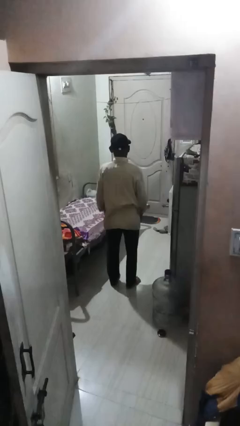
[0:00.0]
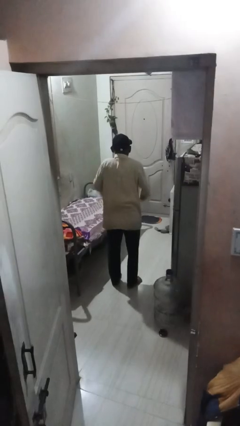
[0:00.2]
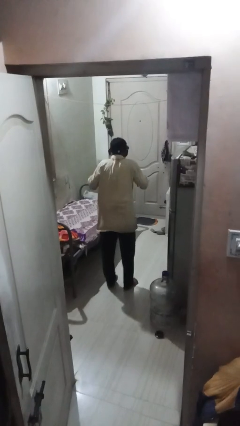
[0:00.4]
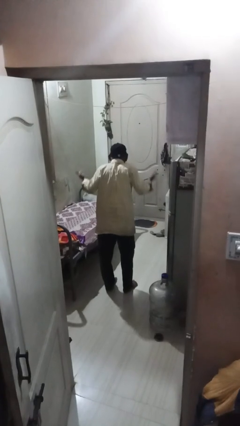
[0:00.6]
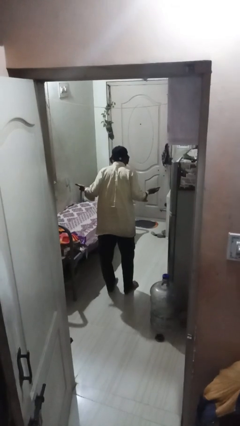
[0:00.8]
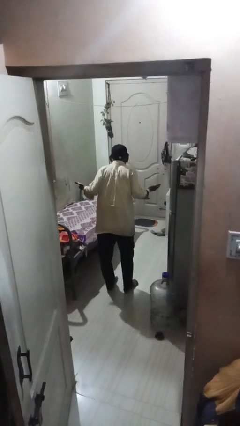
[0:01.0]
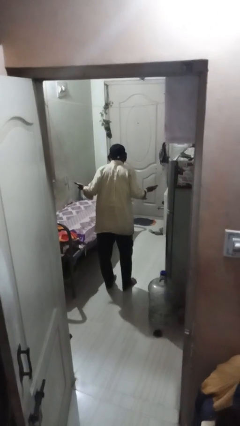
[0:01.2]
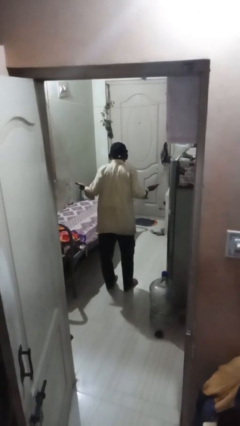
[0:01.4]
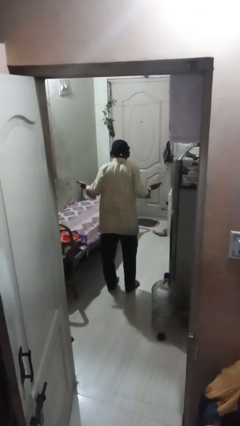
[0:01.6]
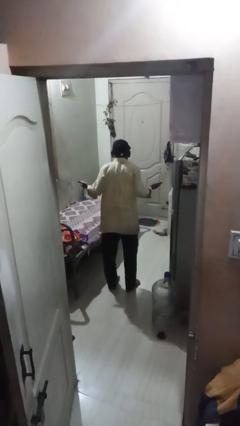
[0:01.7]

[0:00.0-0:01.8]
person shrugs

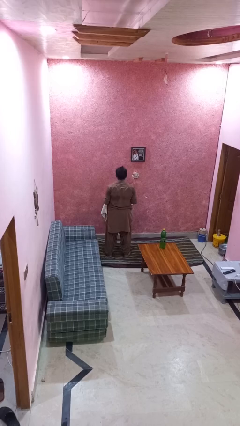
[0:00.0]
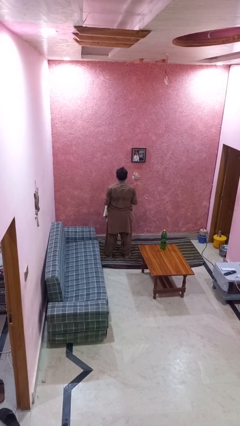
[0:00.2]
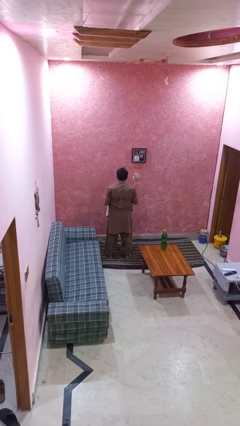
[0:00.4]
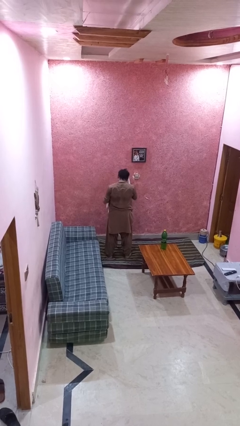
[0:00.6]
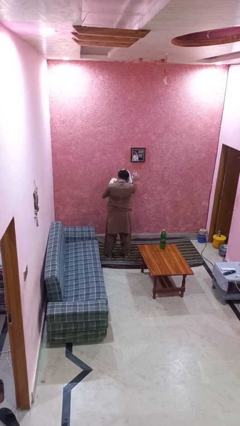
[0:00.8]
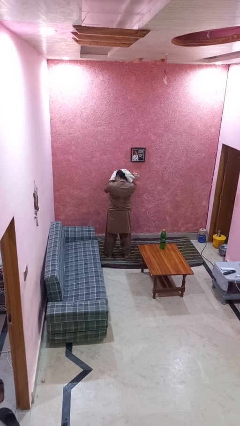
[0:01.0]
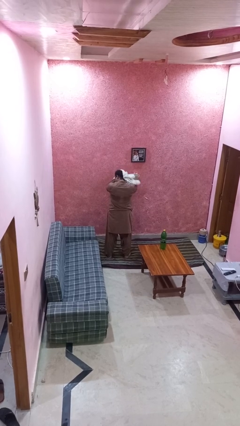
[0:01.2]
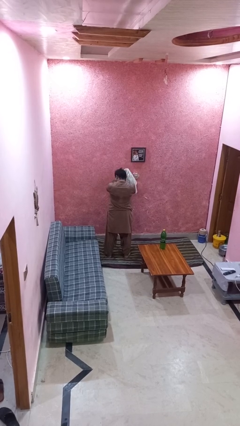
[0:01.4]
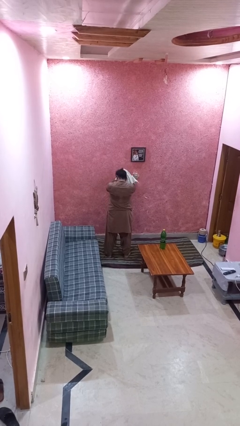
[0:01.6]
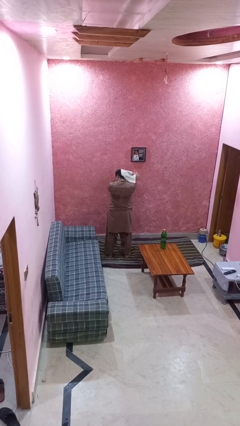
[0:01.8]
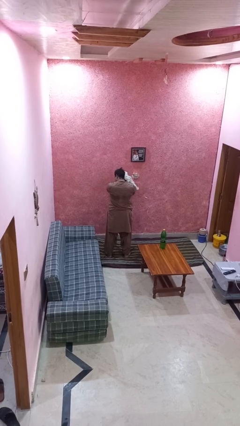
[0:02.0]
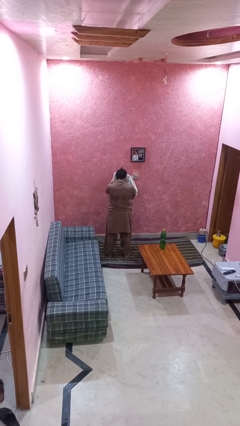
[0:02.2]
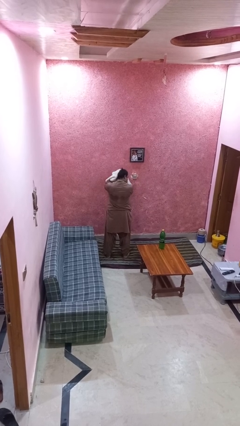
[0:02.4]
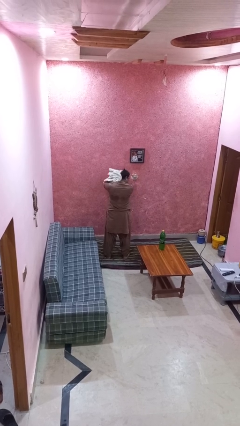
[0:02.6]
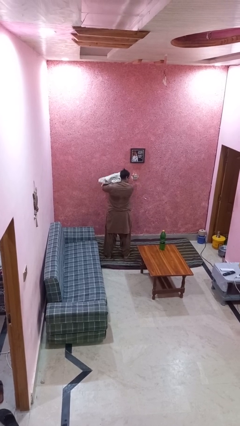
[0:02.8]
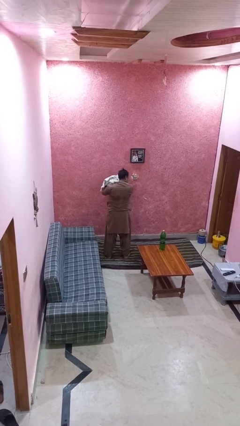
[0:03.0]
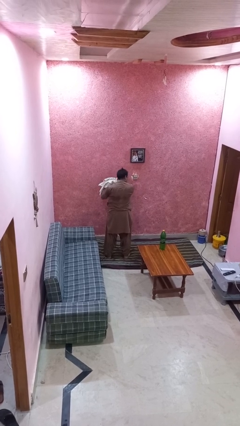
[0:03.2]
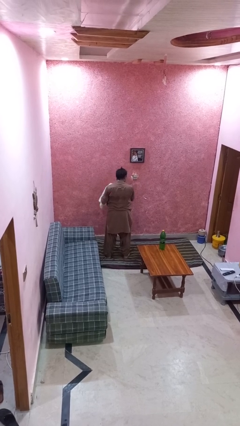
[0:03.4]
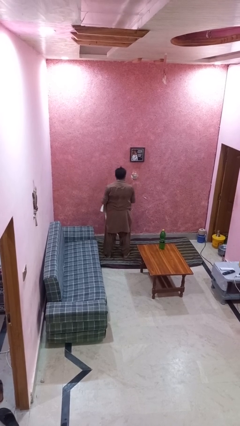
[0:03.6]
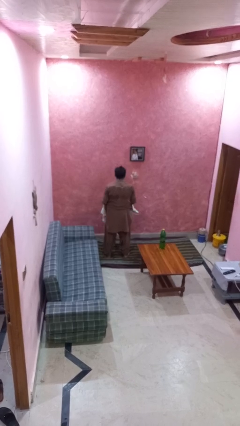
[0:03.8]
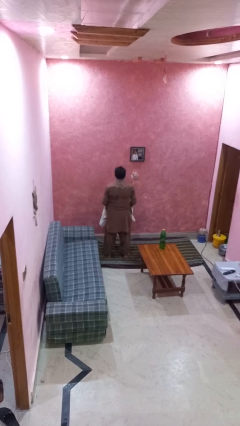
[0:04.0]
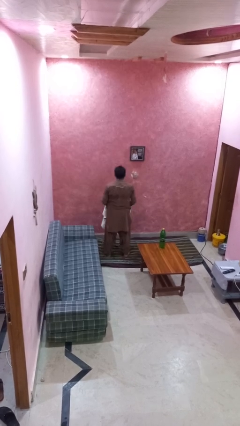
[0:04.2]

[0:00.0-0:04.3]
person dries hair with towel

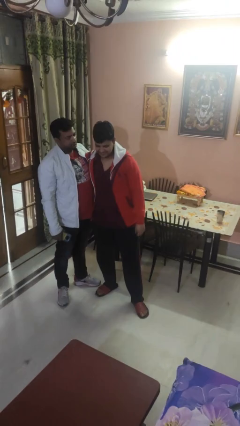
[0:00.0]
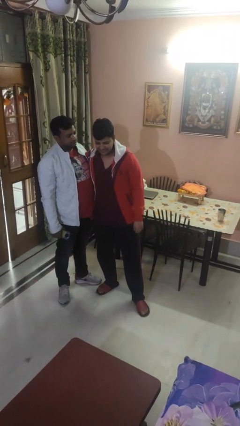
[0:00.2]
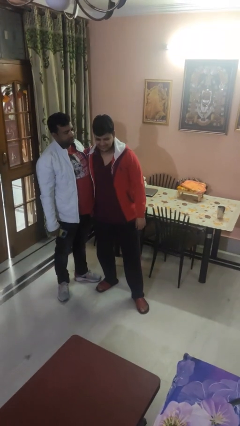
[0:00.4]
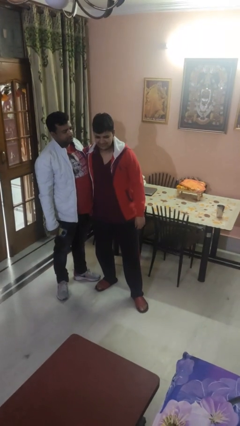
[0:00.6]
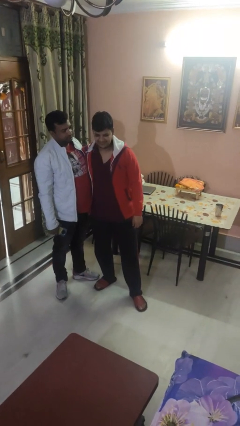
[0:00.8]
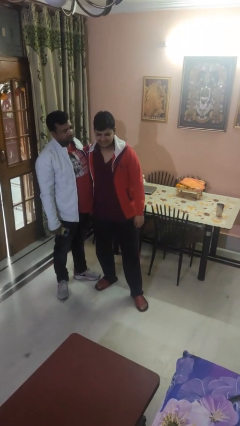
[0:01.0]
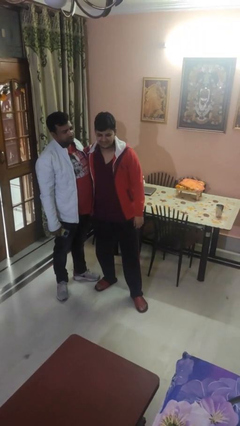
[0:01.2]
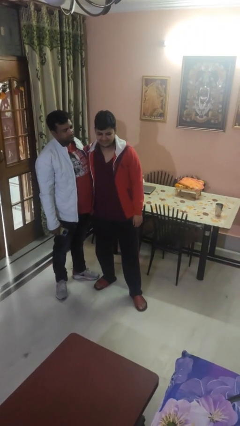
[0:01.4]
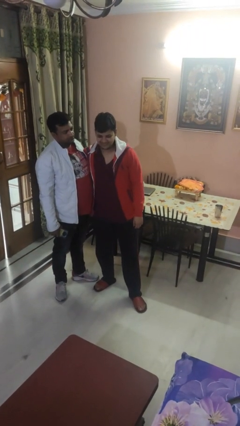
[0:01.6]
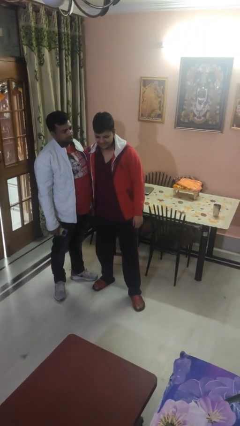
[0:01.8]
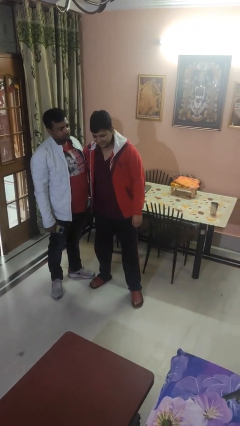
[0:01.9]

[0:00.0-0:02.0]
person hugs person from side

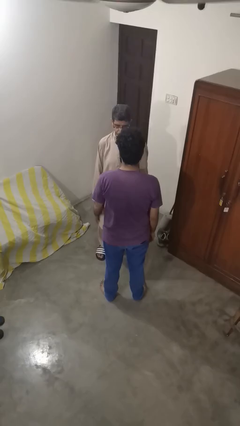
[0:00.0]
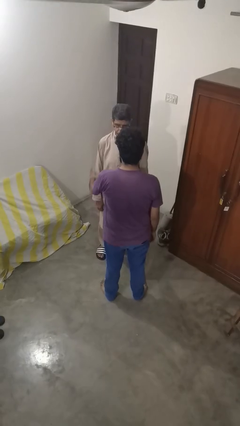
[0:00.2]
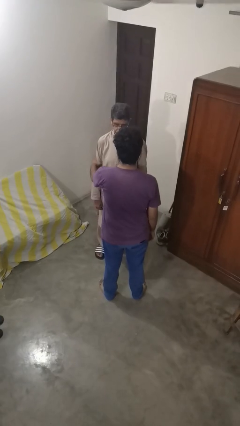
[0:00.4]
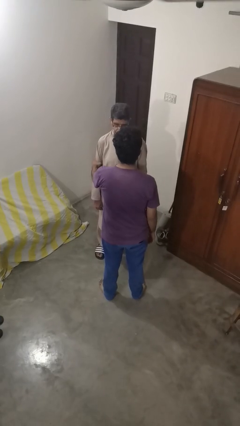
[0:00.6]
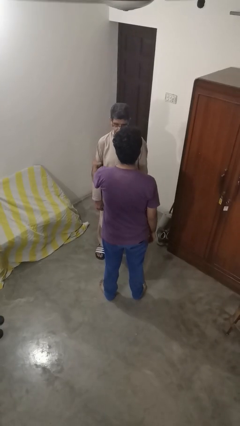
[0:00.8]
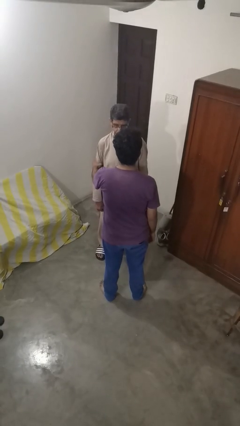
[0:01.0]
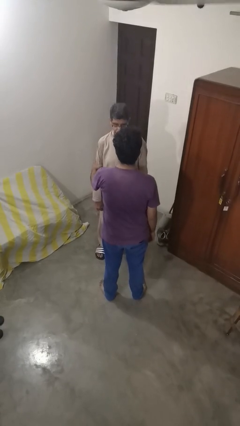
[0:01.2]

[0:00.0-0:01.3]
person grabs person by bicep

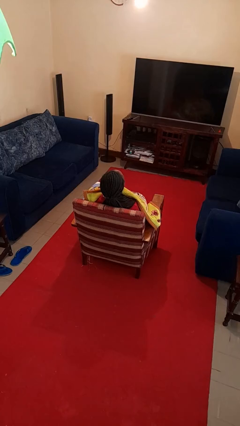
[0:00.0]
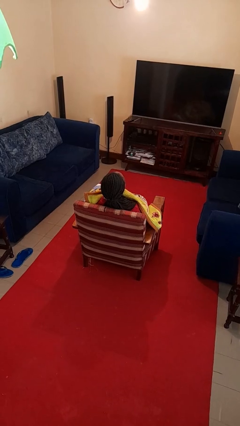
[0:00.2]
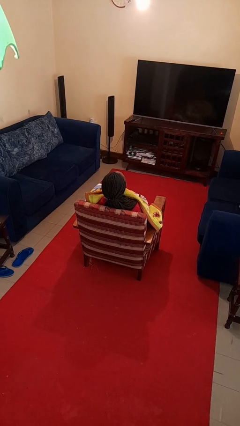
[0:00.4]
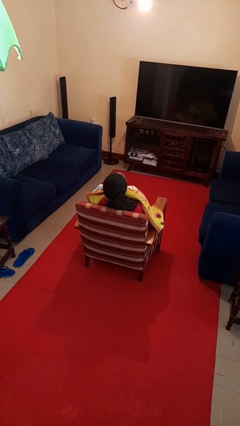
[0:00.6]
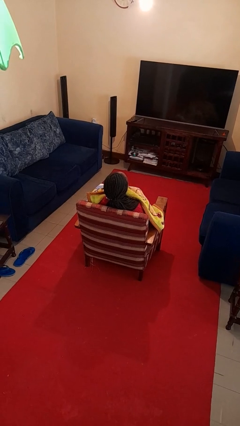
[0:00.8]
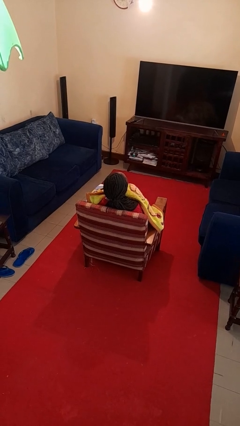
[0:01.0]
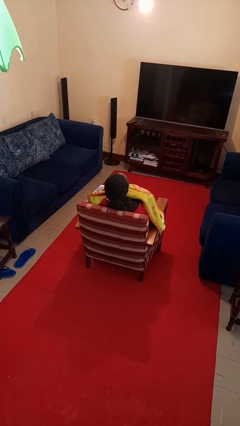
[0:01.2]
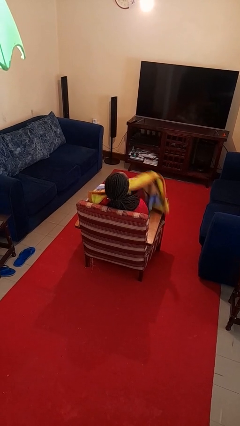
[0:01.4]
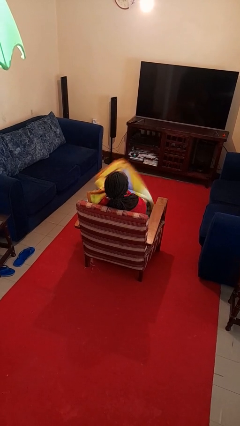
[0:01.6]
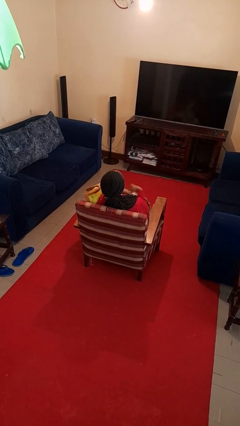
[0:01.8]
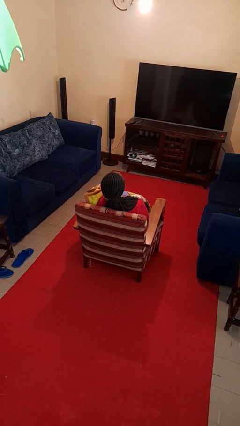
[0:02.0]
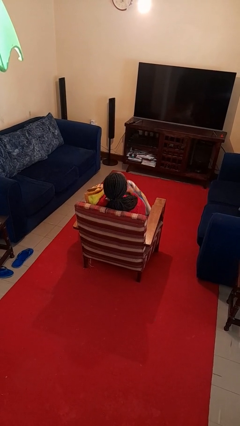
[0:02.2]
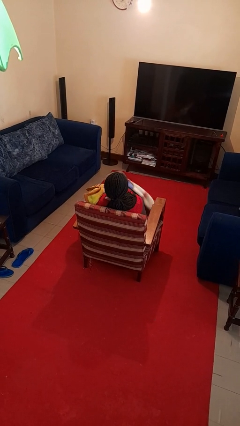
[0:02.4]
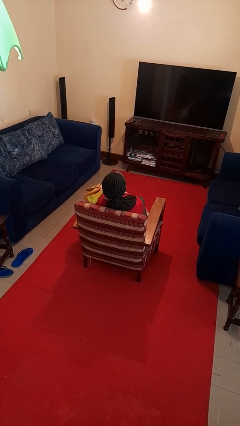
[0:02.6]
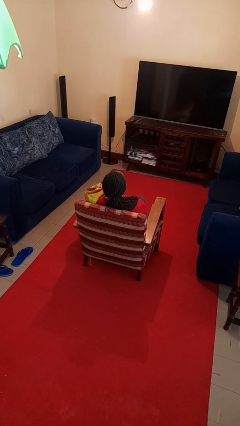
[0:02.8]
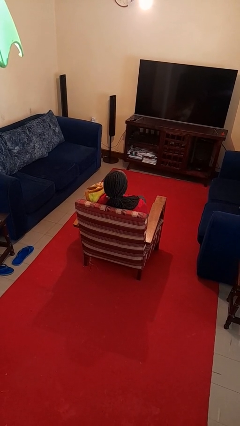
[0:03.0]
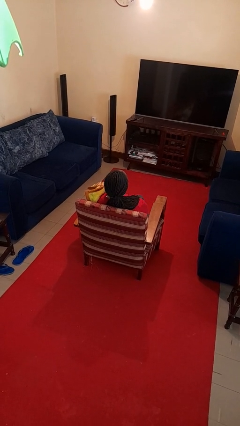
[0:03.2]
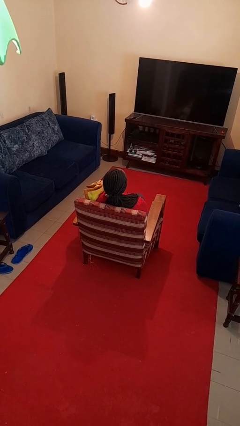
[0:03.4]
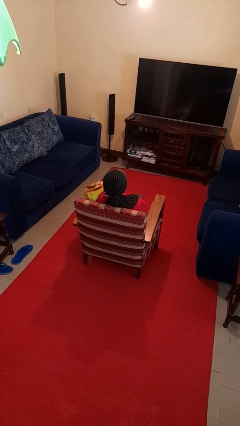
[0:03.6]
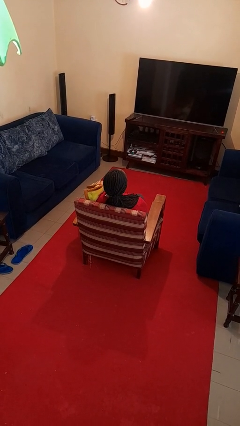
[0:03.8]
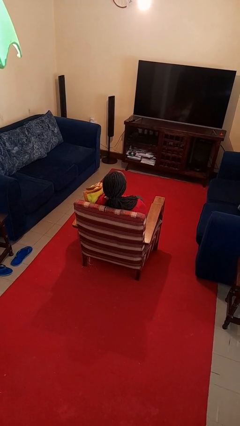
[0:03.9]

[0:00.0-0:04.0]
person uncovers with blanket

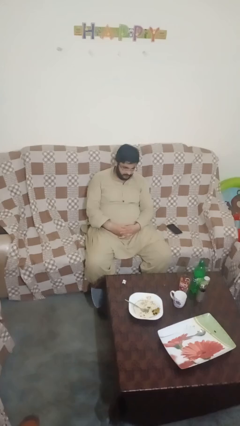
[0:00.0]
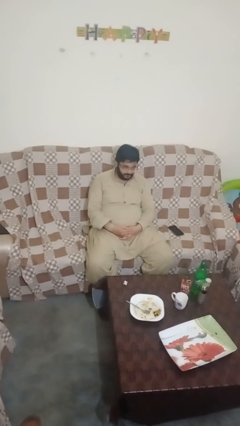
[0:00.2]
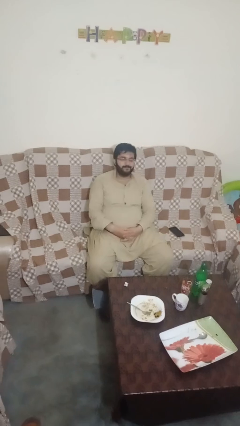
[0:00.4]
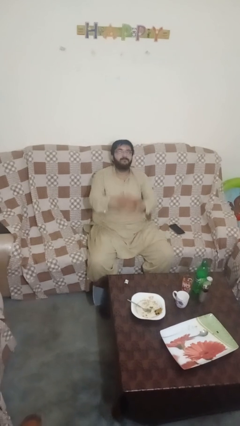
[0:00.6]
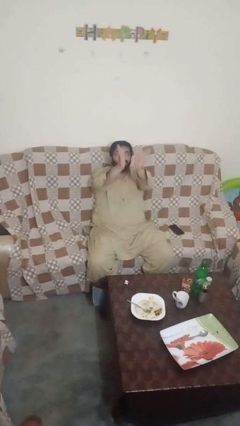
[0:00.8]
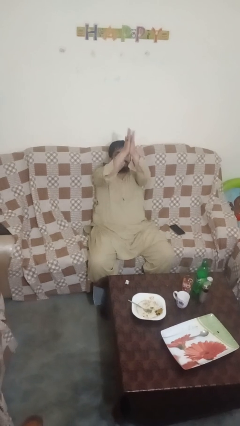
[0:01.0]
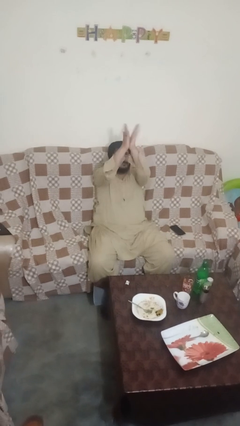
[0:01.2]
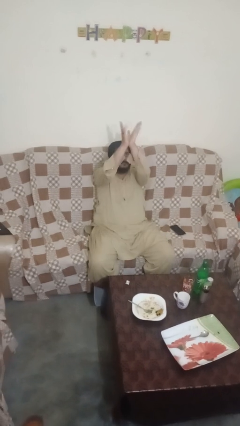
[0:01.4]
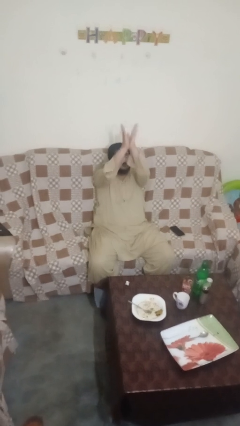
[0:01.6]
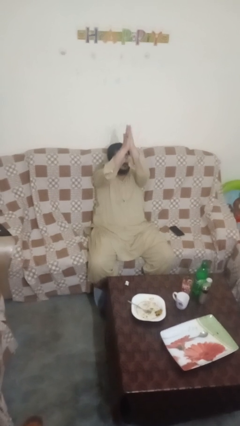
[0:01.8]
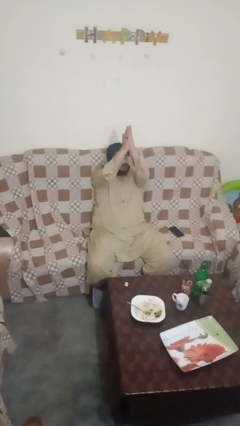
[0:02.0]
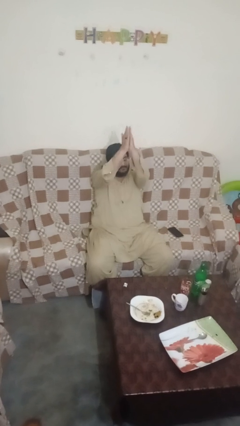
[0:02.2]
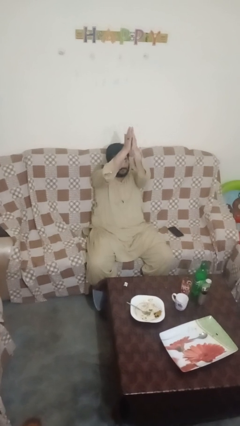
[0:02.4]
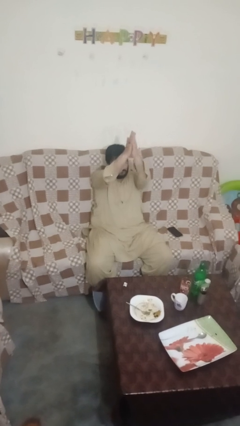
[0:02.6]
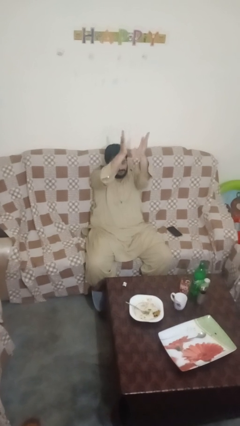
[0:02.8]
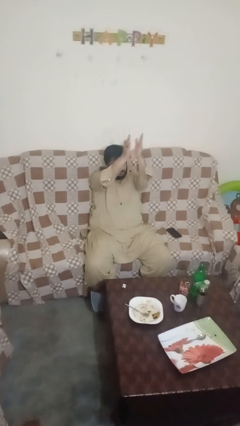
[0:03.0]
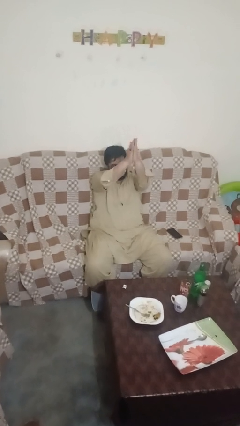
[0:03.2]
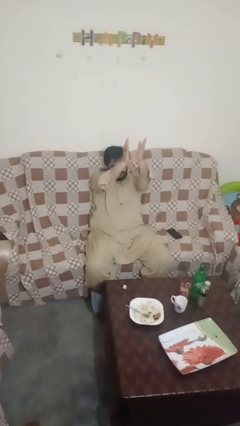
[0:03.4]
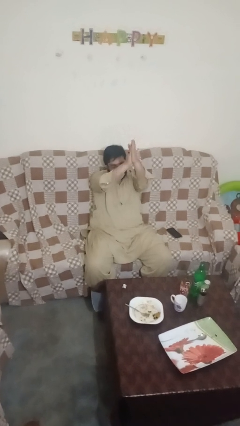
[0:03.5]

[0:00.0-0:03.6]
person claps hands

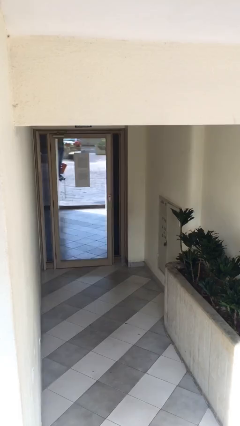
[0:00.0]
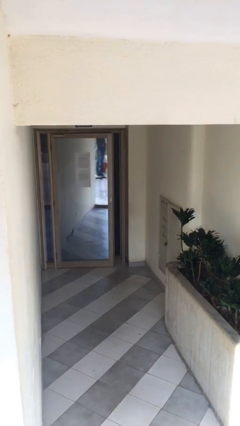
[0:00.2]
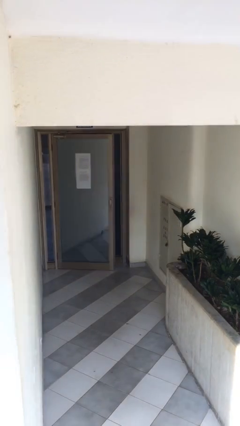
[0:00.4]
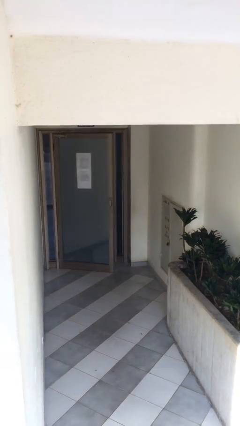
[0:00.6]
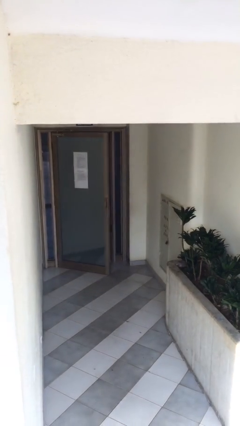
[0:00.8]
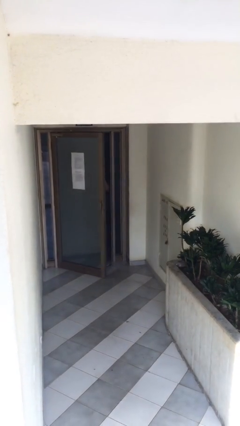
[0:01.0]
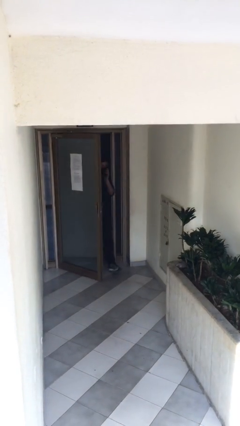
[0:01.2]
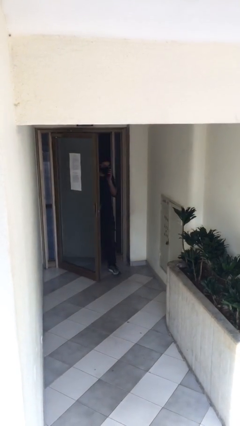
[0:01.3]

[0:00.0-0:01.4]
person opens facility door
